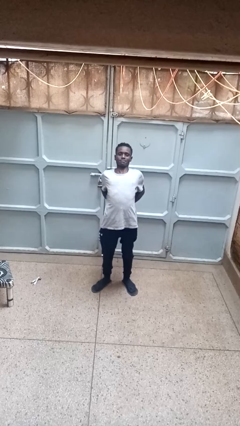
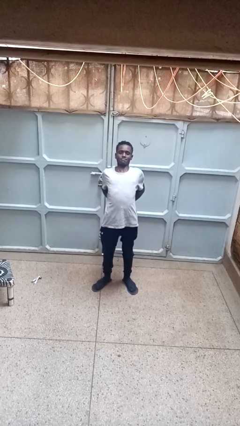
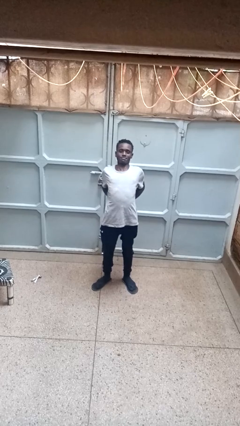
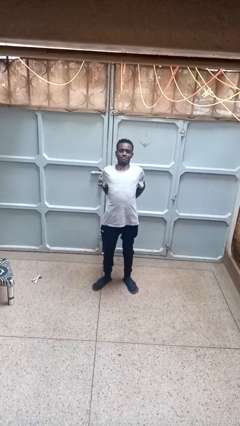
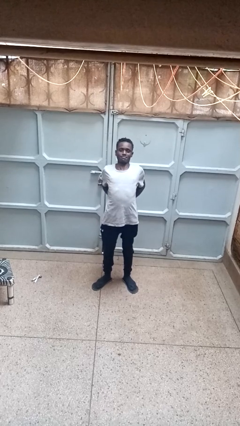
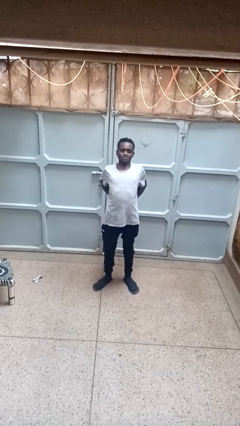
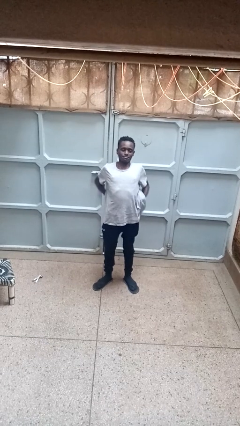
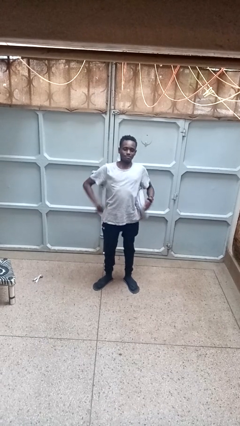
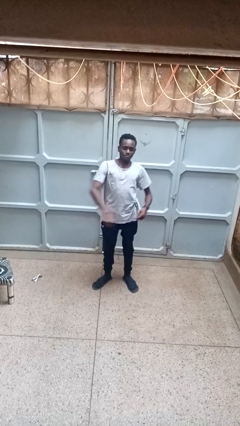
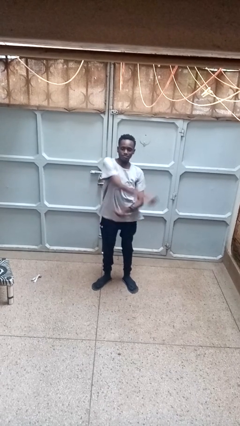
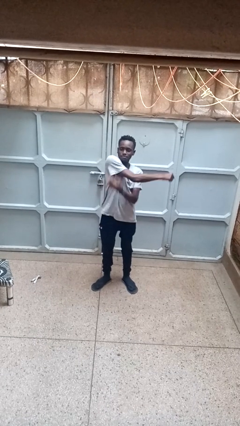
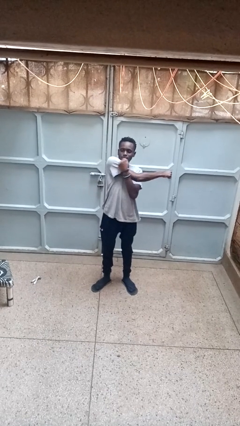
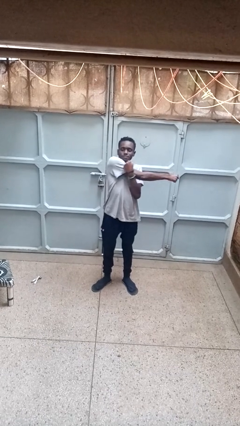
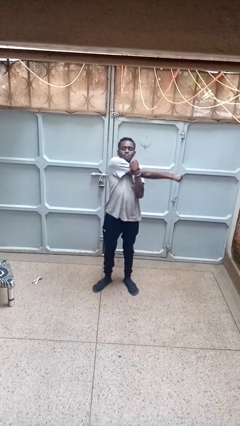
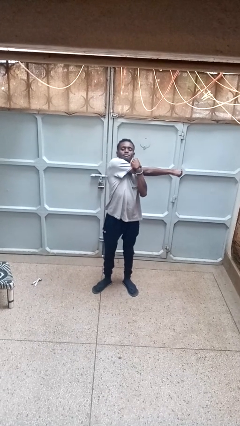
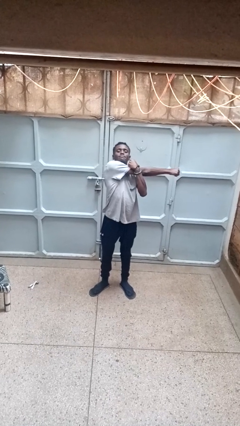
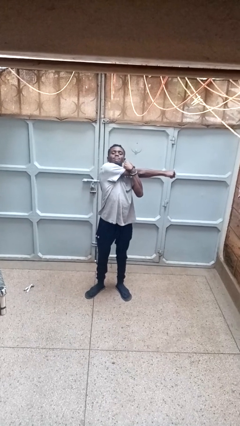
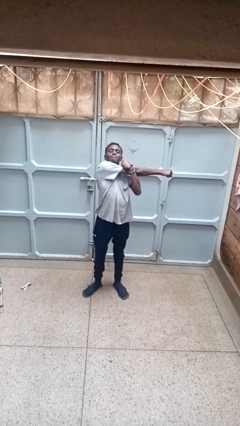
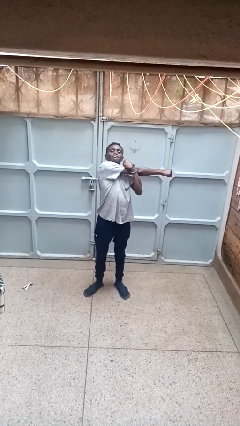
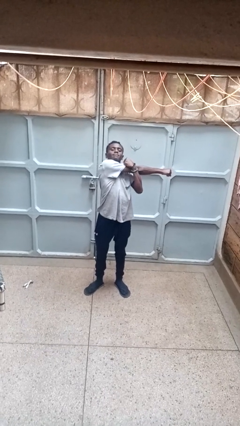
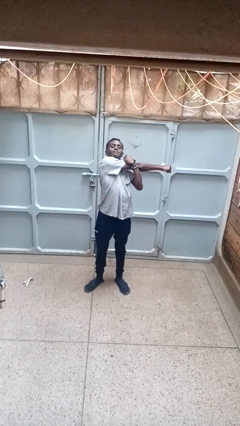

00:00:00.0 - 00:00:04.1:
person stretches arms to side

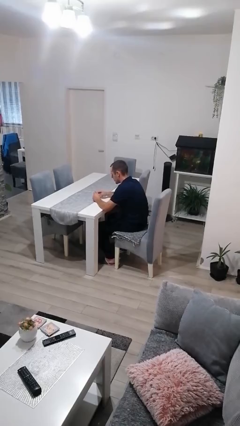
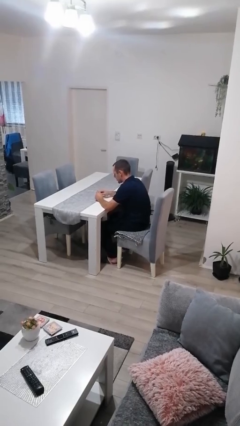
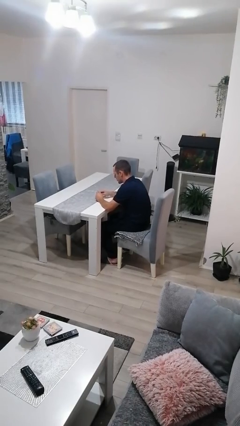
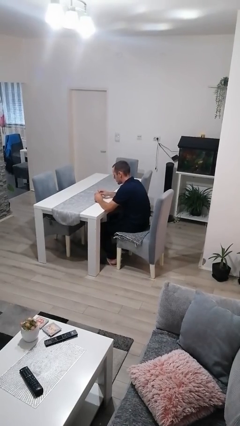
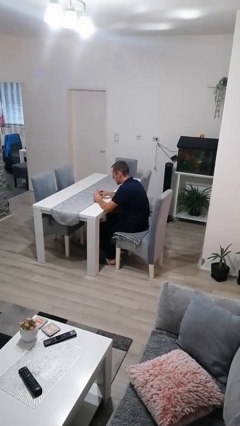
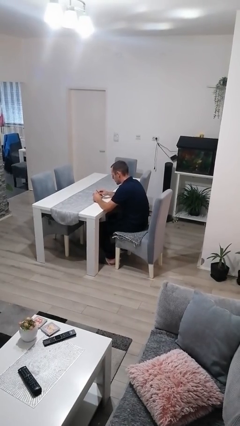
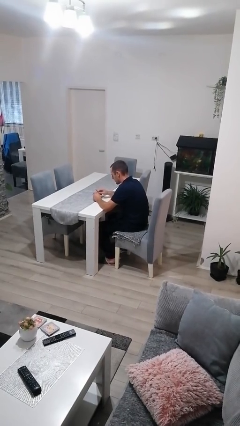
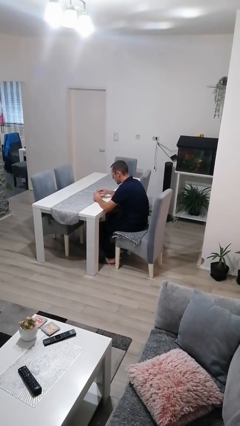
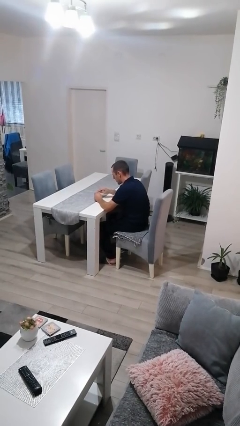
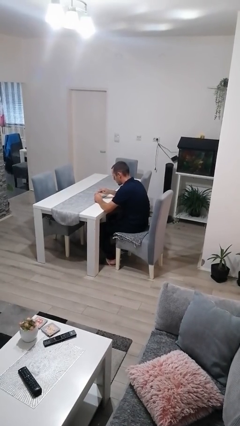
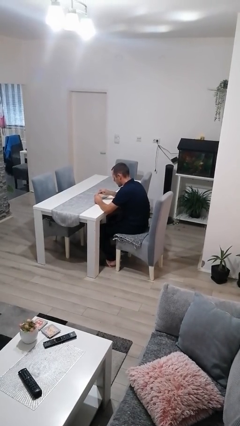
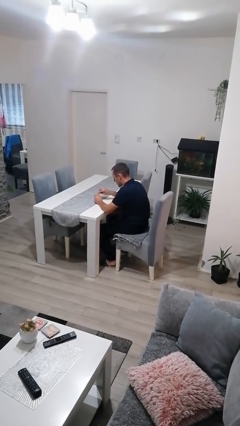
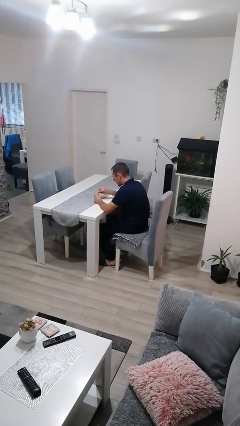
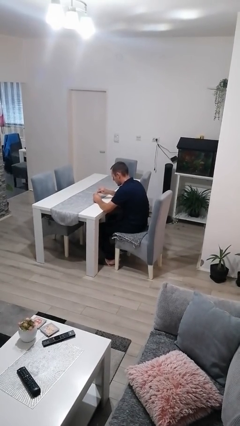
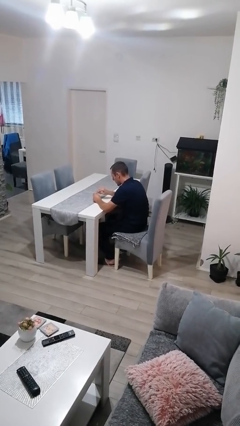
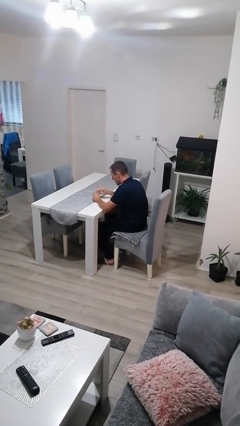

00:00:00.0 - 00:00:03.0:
person files fingernails

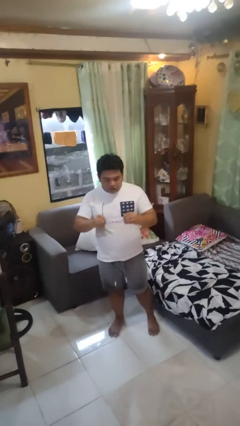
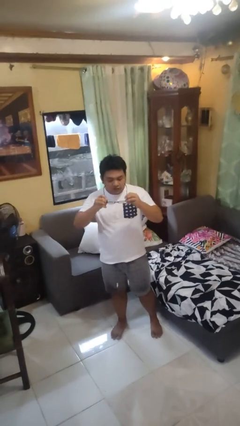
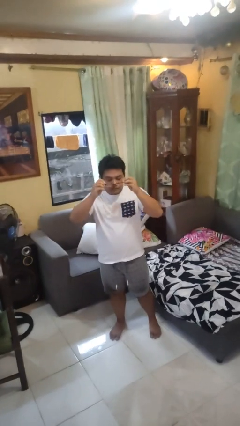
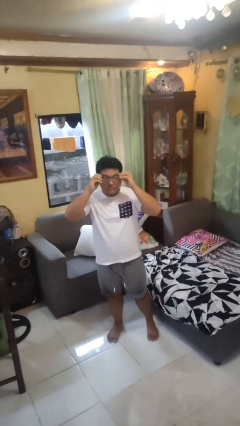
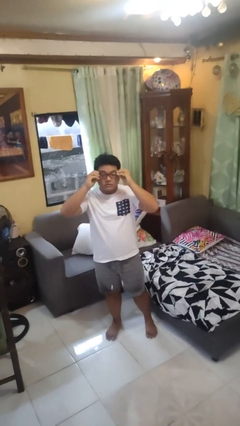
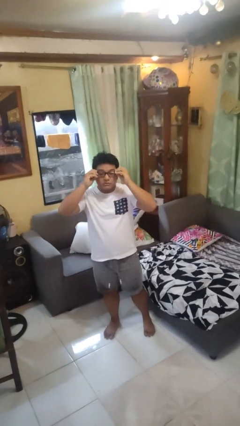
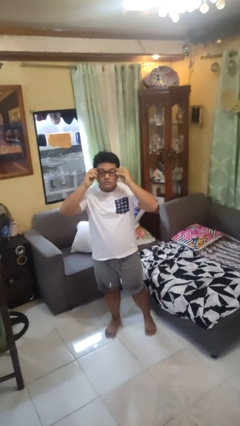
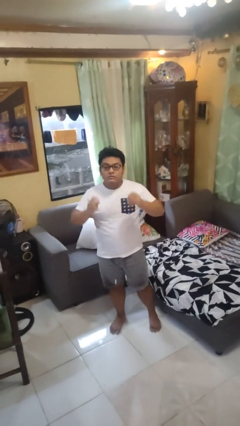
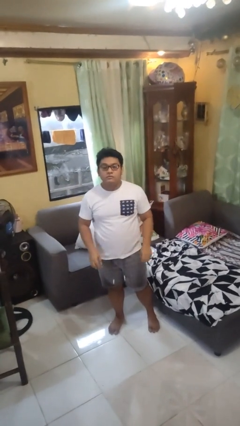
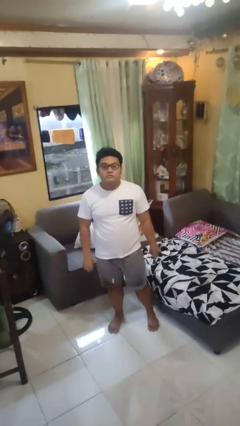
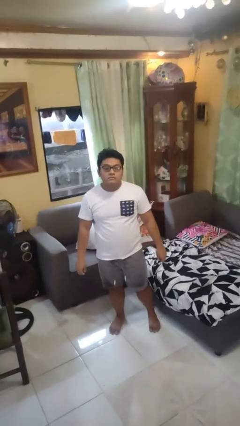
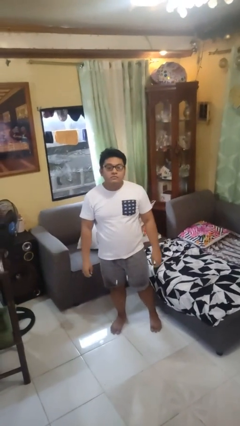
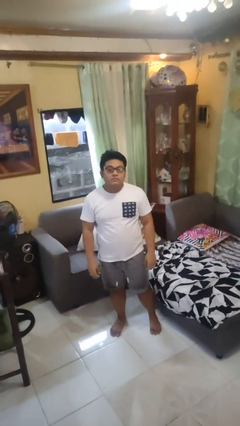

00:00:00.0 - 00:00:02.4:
person puts on glasses

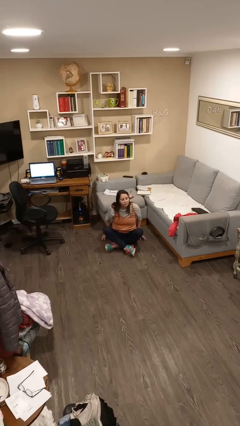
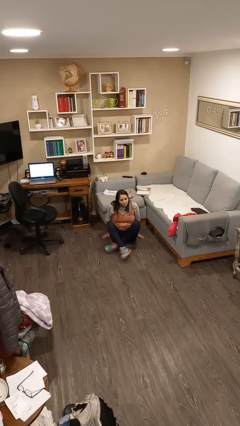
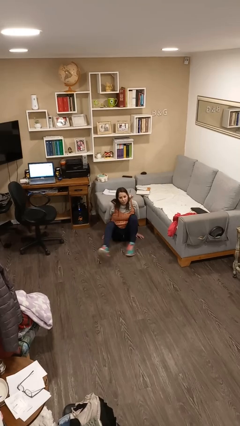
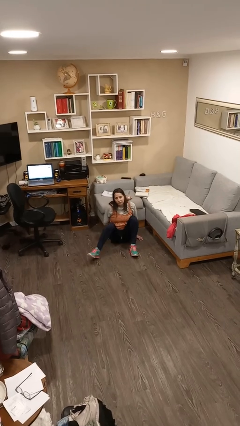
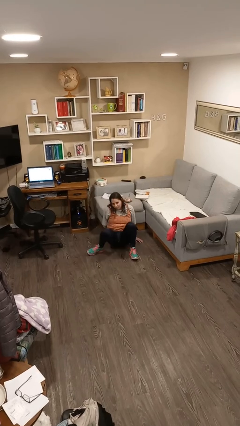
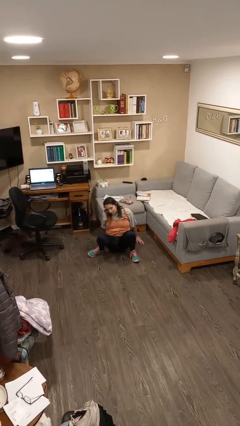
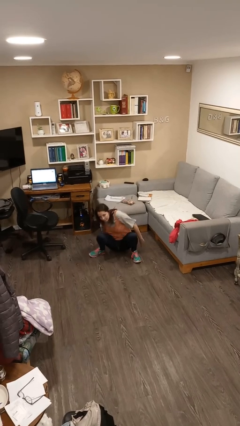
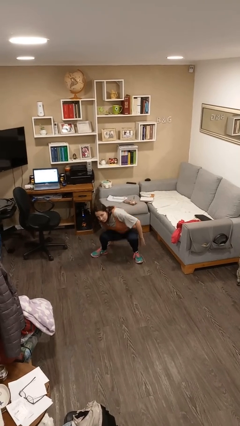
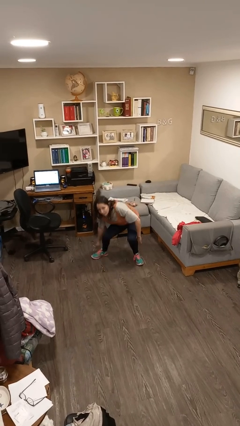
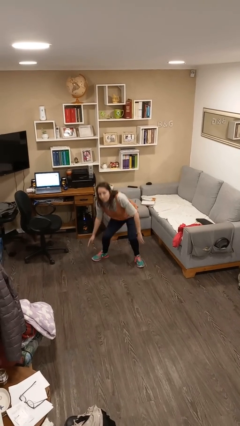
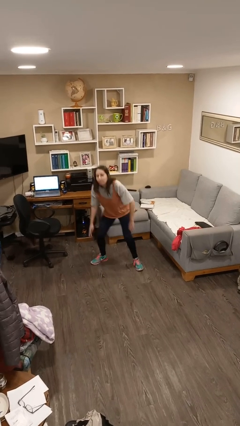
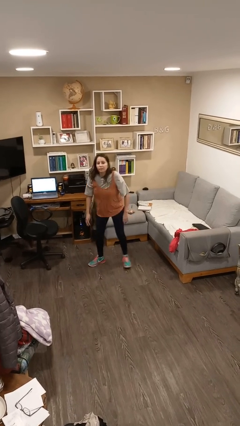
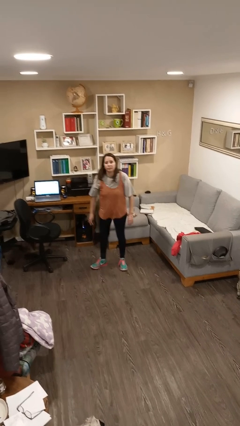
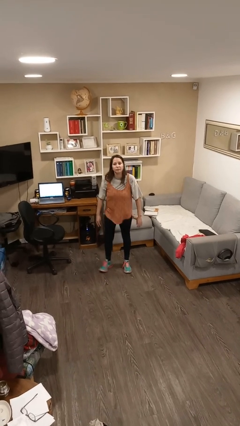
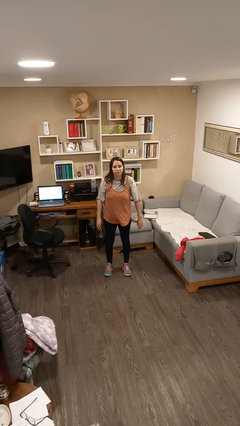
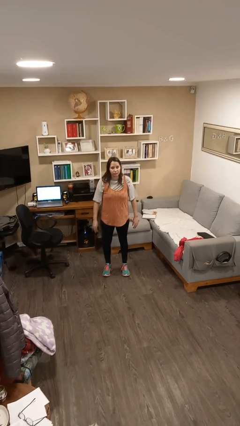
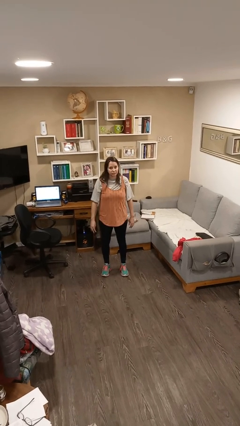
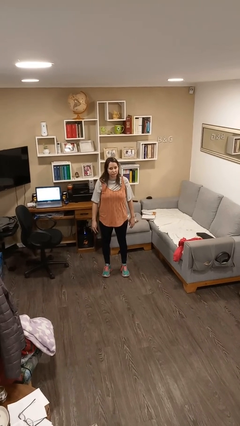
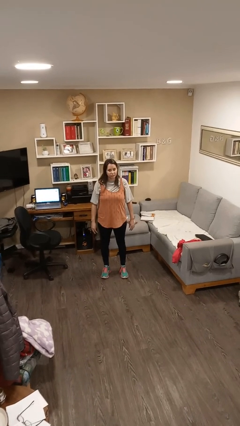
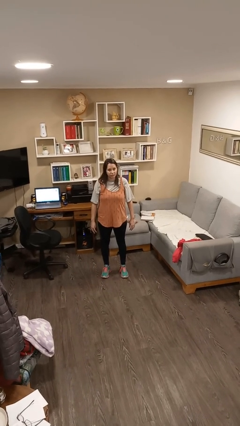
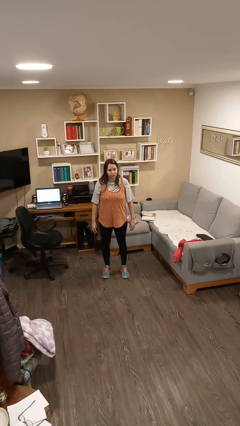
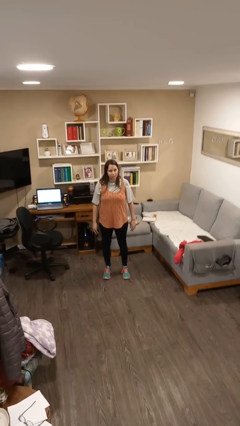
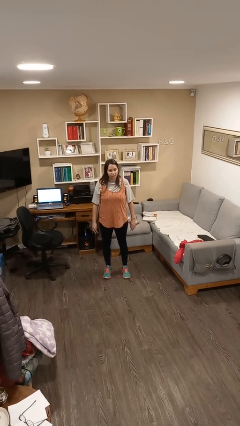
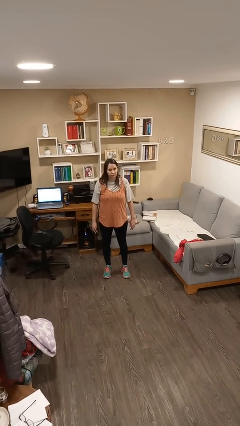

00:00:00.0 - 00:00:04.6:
person stands up from floor

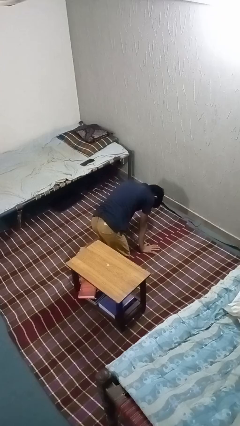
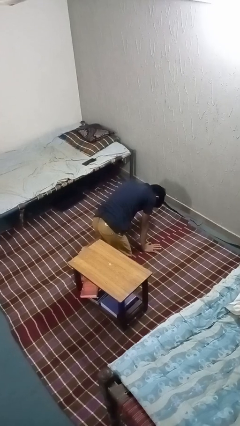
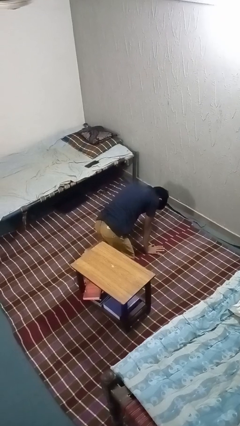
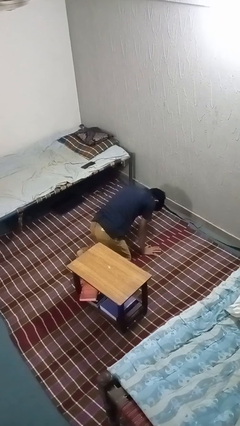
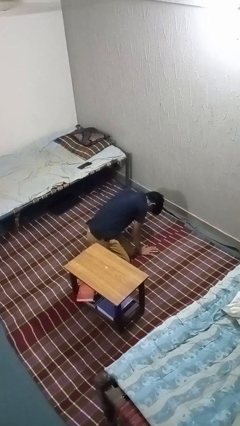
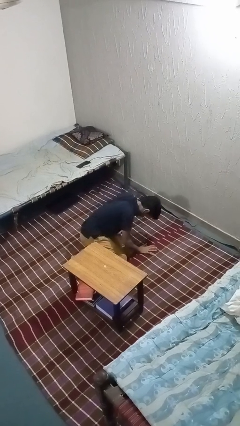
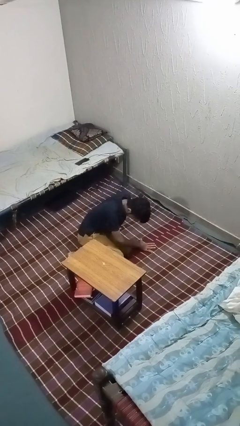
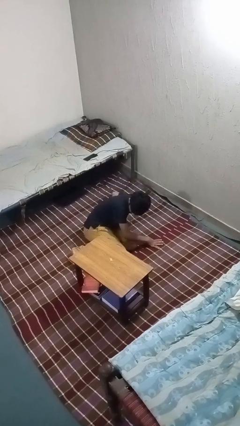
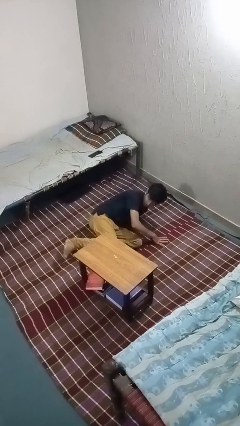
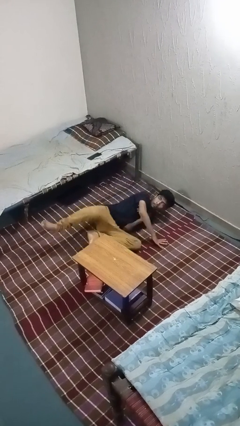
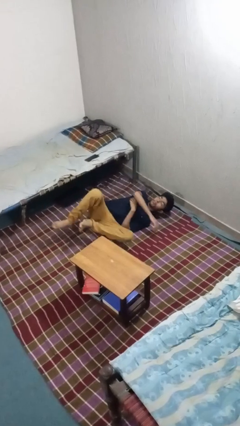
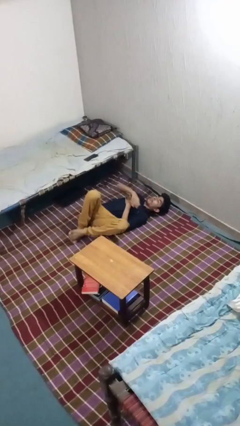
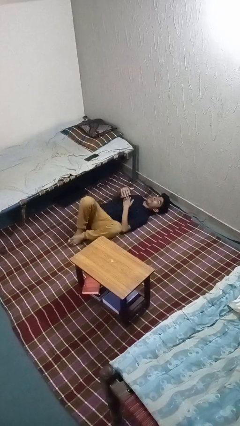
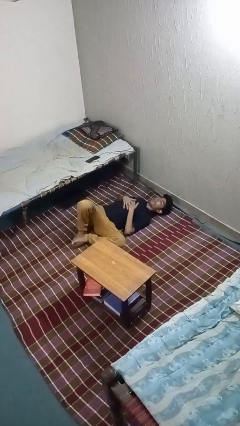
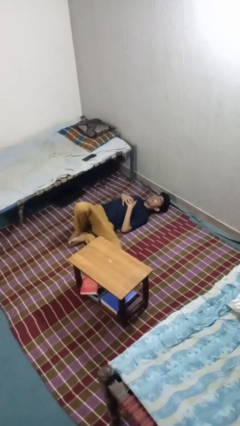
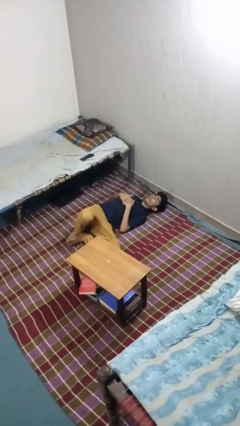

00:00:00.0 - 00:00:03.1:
person lies down on floor

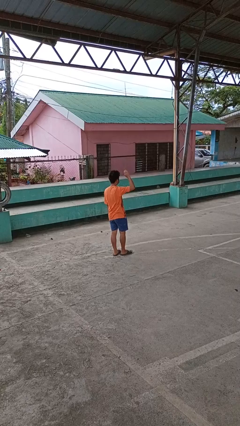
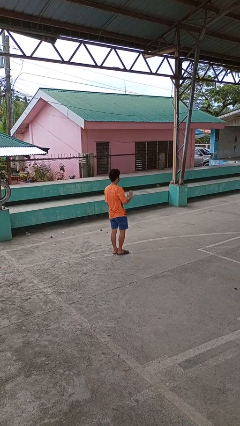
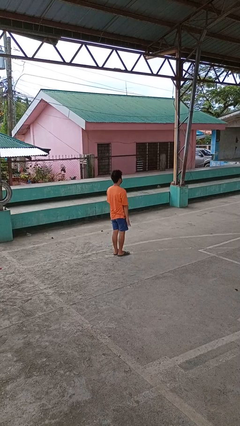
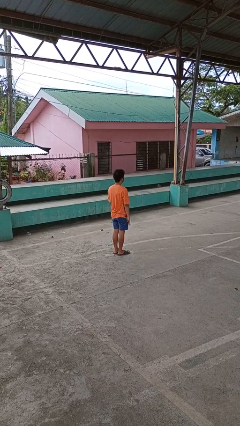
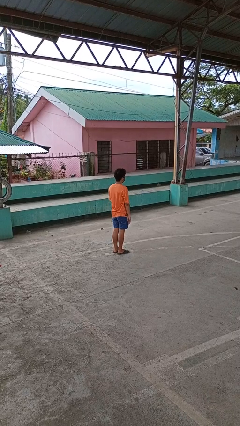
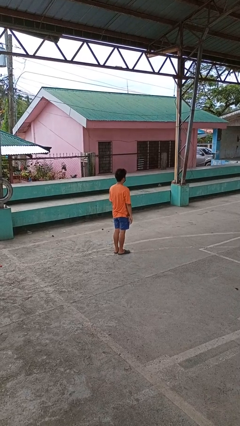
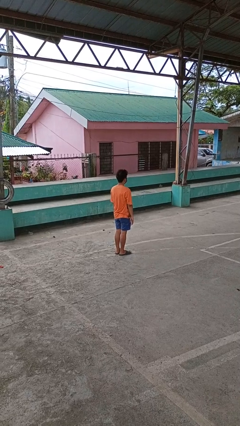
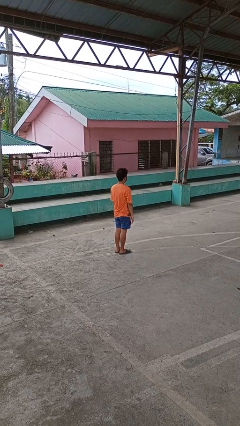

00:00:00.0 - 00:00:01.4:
person gestures lower hand
